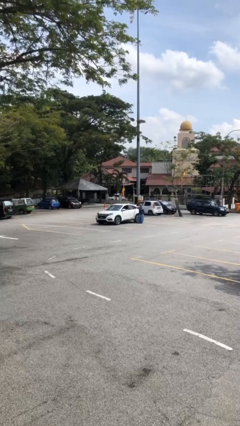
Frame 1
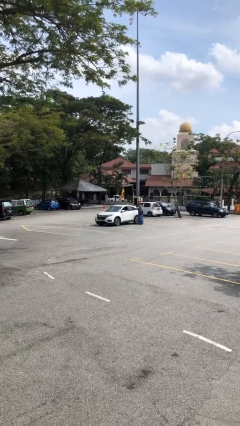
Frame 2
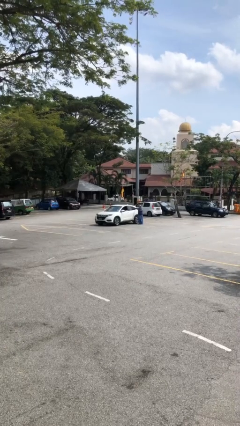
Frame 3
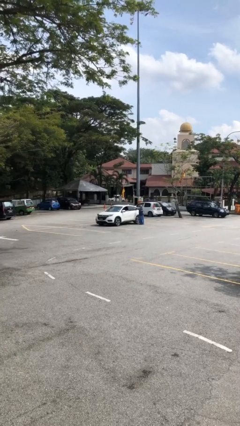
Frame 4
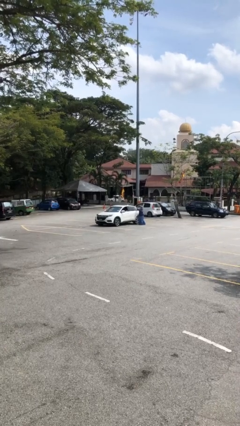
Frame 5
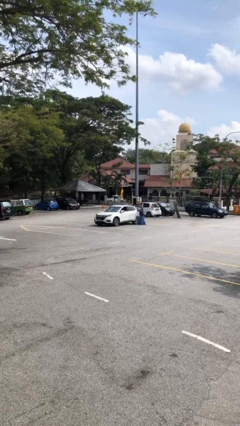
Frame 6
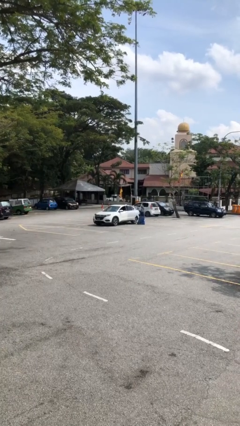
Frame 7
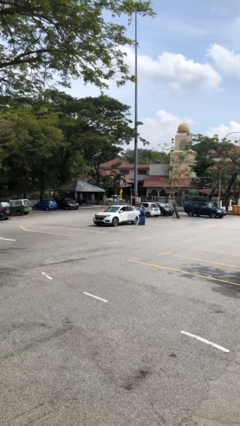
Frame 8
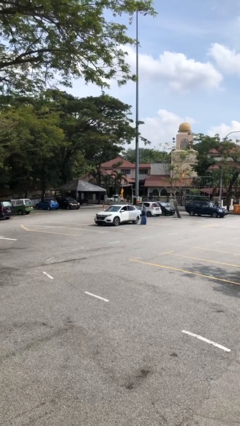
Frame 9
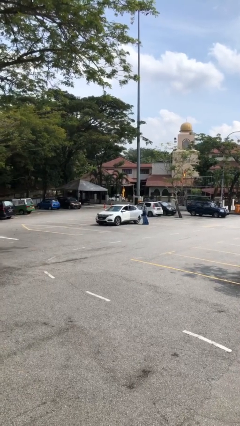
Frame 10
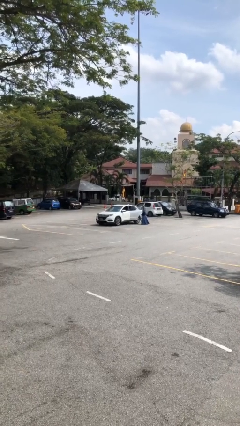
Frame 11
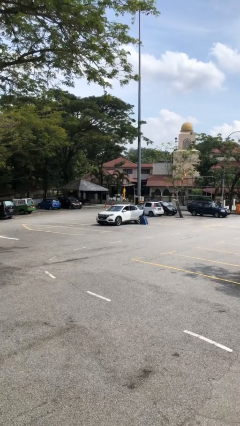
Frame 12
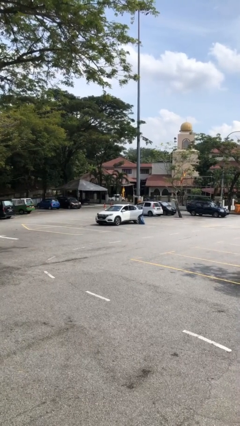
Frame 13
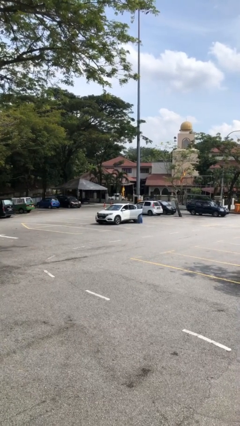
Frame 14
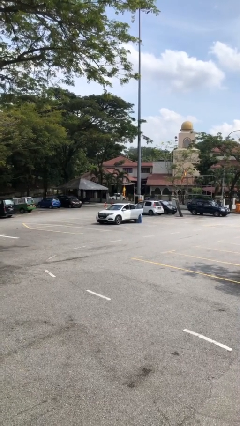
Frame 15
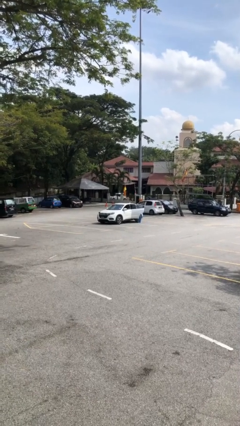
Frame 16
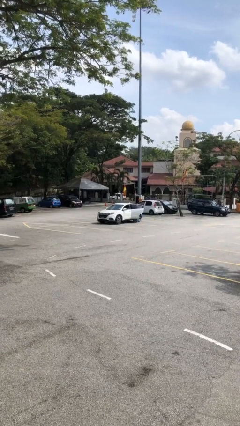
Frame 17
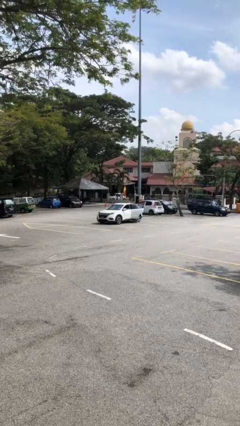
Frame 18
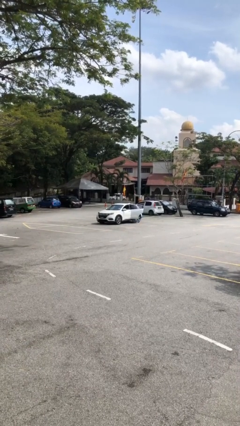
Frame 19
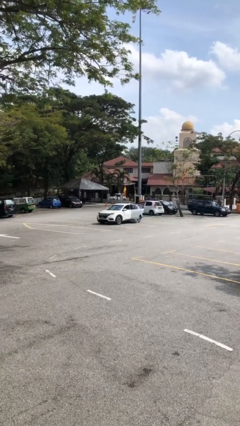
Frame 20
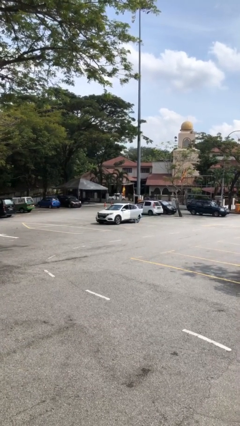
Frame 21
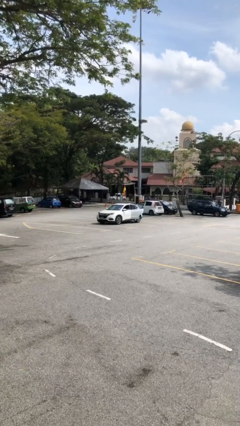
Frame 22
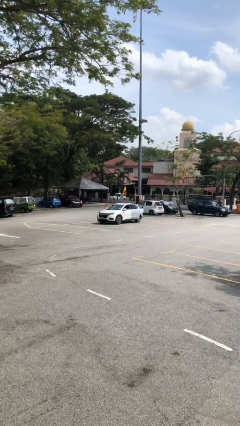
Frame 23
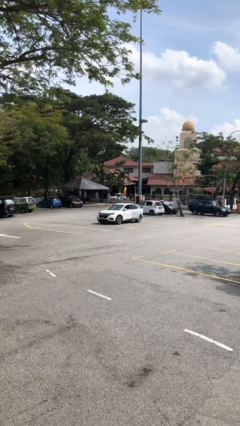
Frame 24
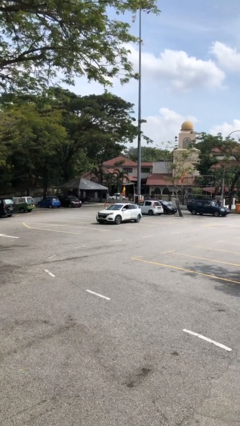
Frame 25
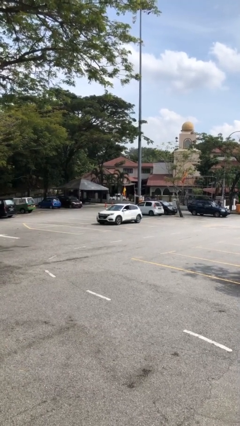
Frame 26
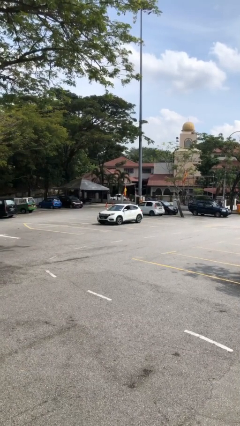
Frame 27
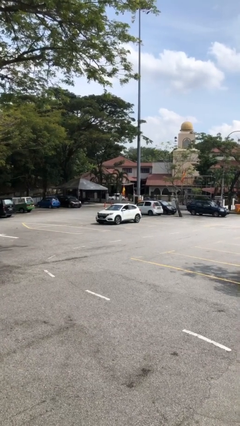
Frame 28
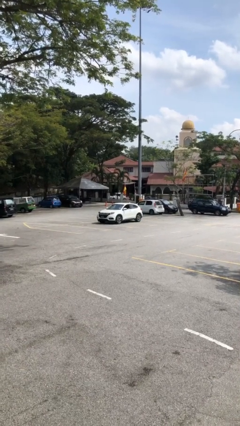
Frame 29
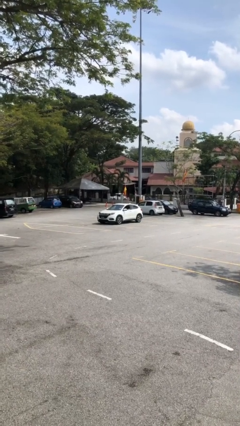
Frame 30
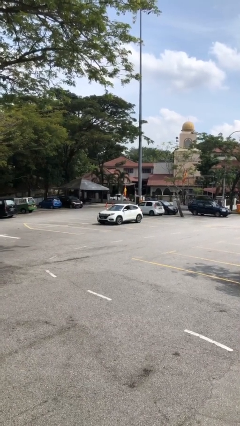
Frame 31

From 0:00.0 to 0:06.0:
car picks up person

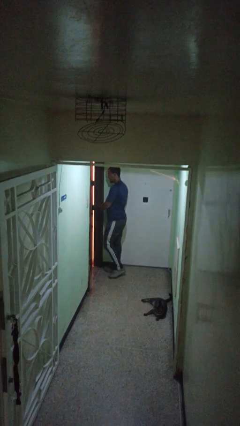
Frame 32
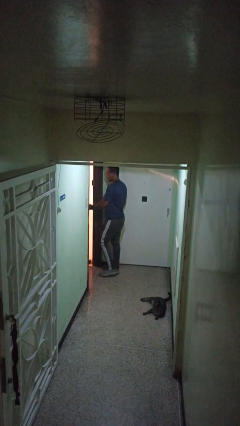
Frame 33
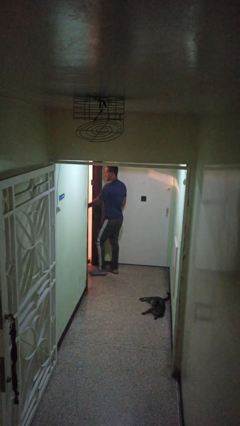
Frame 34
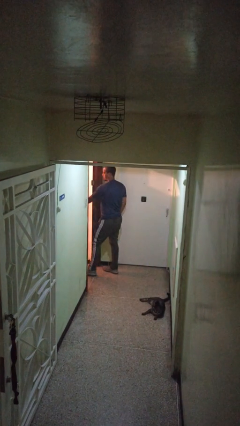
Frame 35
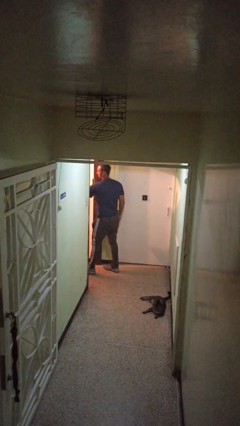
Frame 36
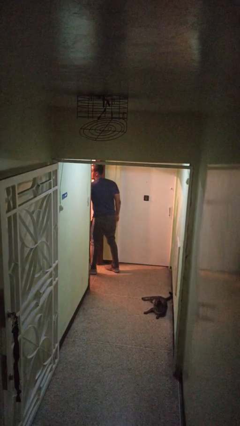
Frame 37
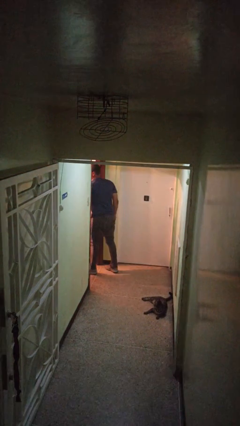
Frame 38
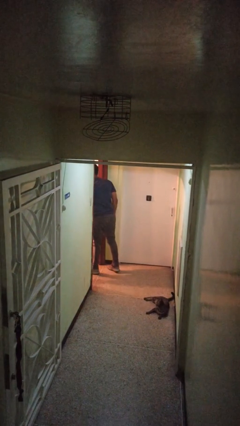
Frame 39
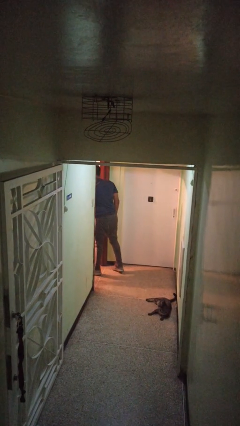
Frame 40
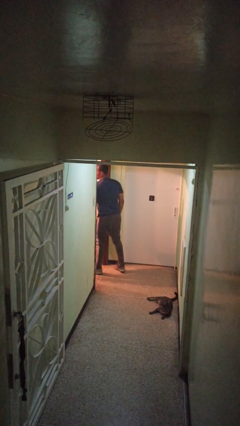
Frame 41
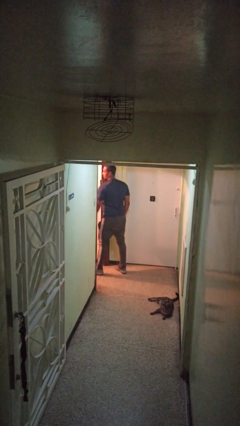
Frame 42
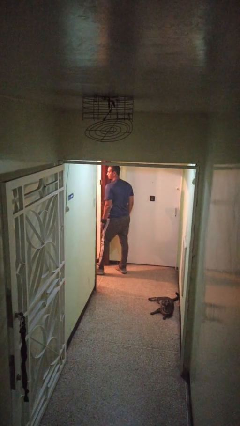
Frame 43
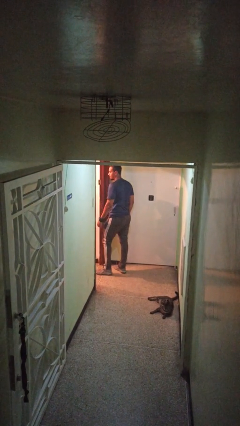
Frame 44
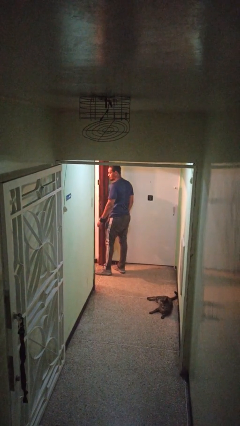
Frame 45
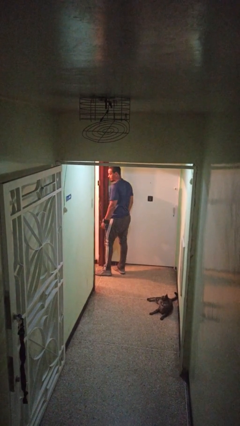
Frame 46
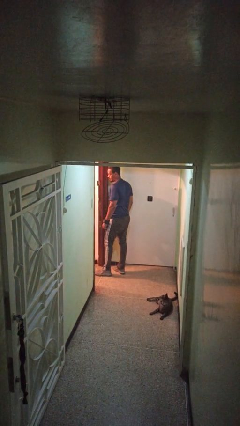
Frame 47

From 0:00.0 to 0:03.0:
person opens facility door

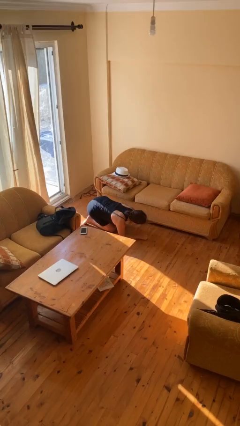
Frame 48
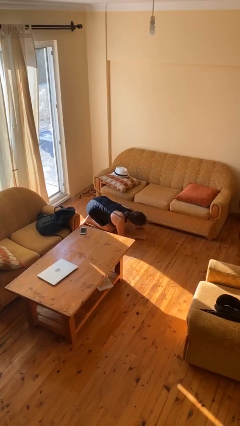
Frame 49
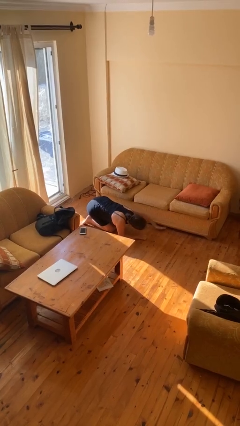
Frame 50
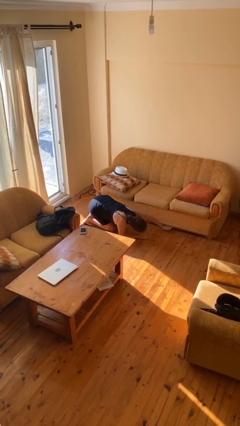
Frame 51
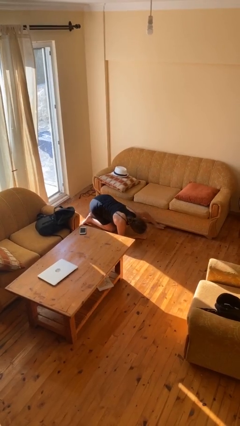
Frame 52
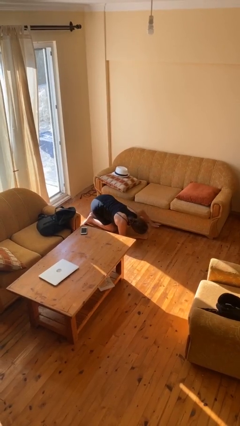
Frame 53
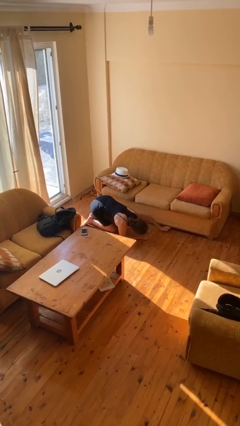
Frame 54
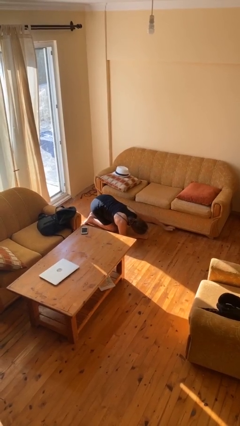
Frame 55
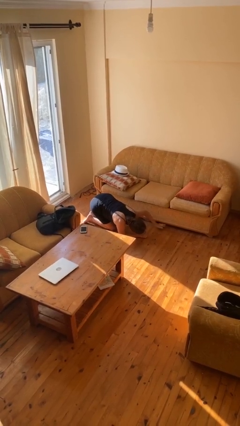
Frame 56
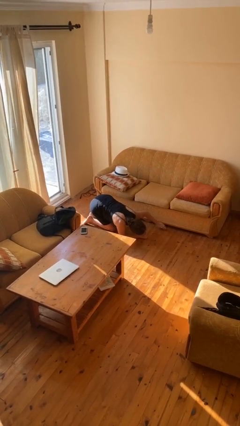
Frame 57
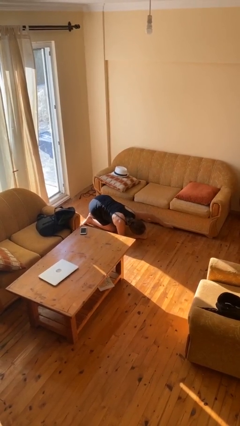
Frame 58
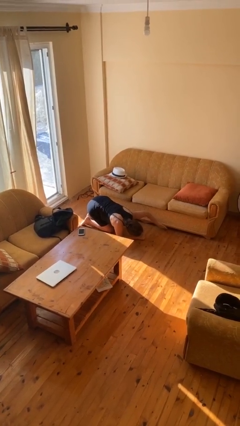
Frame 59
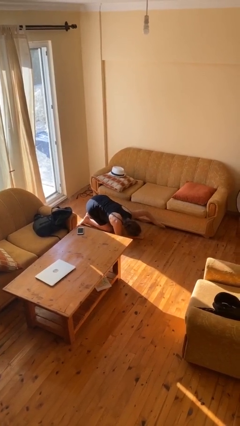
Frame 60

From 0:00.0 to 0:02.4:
person searches under couch

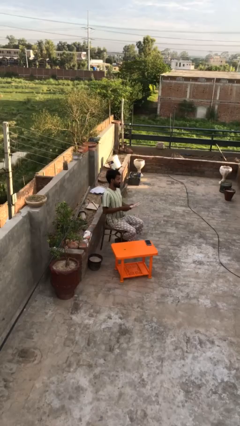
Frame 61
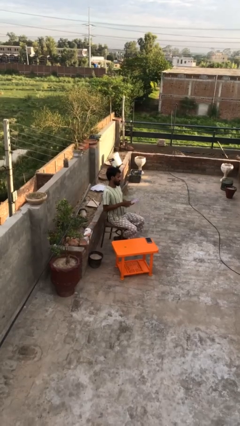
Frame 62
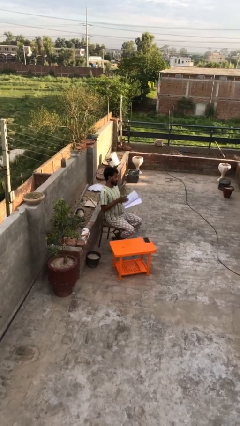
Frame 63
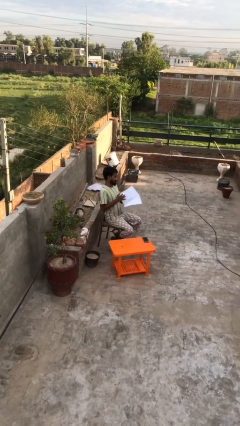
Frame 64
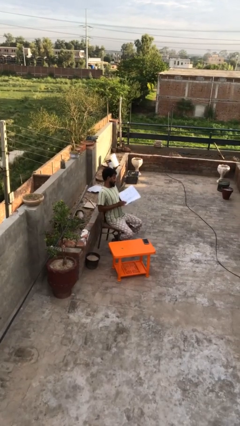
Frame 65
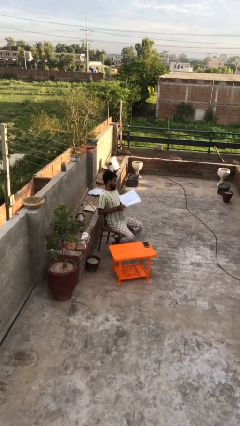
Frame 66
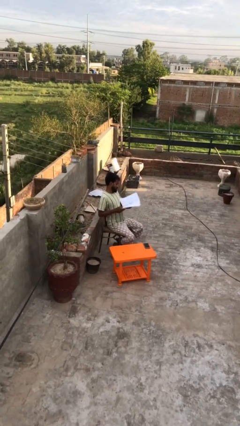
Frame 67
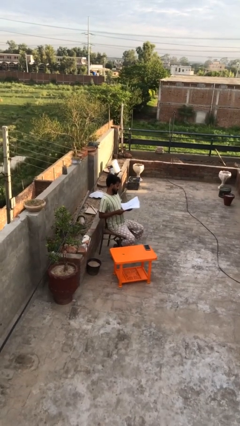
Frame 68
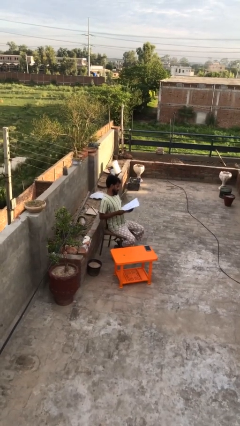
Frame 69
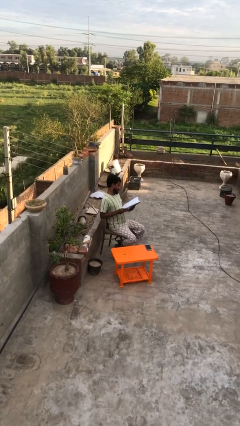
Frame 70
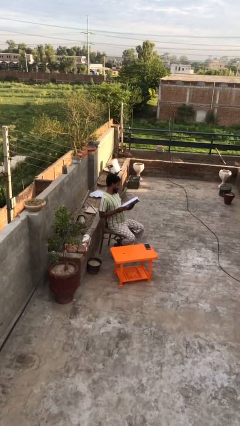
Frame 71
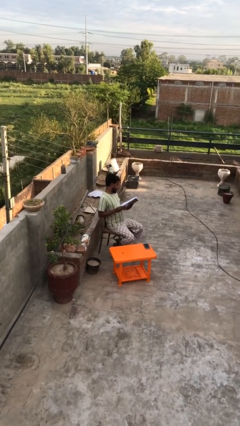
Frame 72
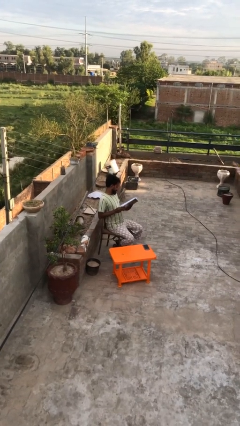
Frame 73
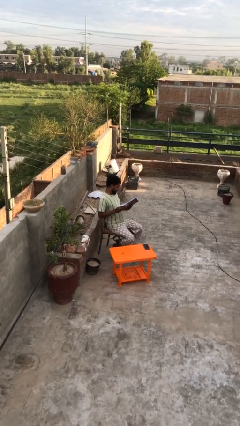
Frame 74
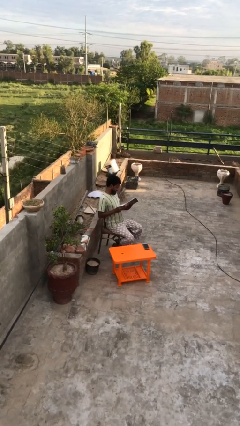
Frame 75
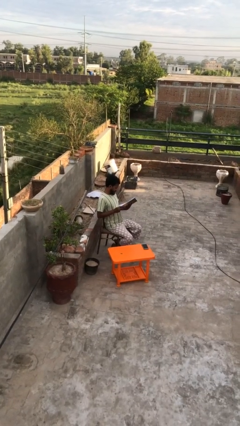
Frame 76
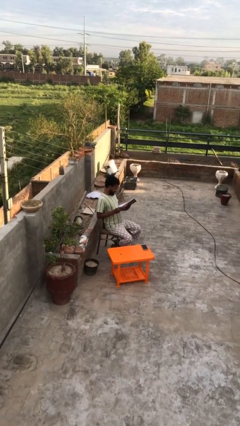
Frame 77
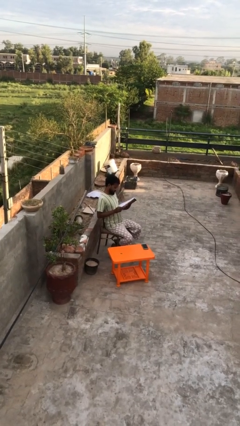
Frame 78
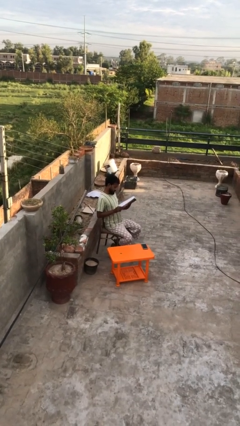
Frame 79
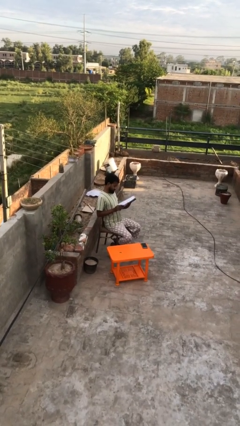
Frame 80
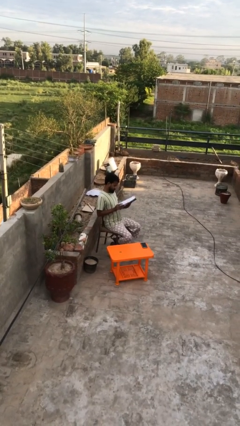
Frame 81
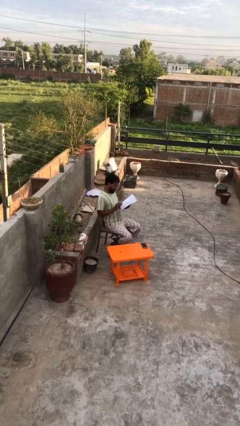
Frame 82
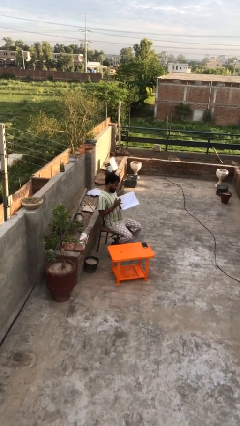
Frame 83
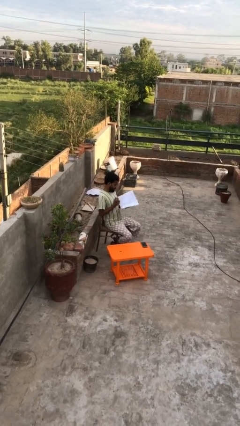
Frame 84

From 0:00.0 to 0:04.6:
person reads document

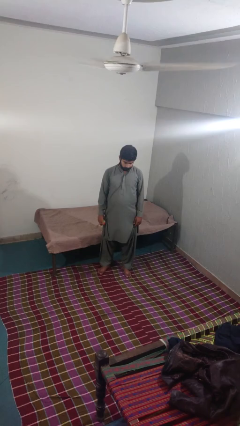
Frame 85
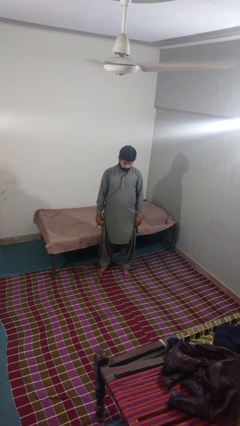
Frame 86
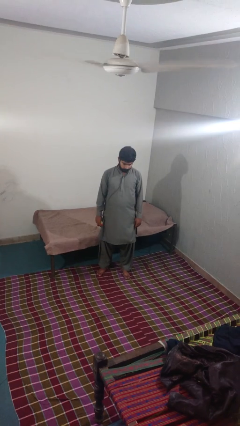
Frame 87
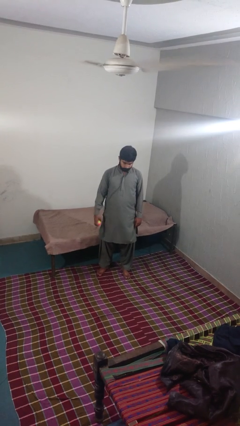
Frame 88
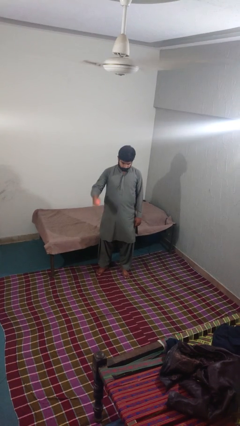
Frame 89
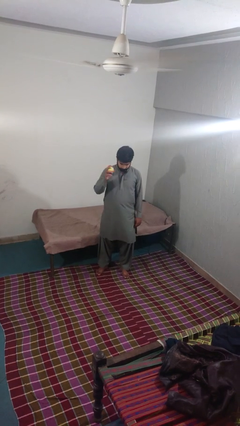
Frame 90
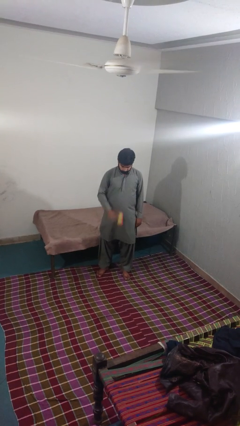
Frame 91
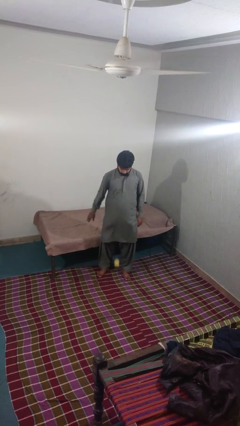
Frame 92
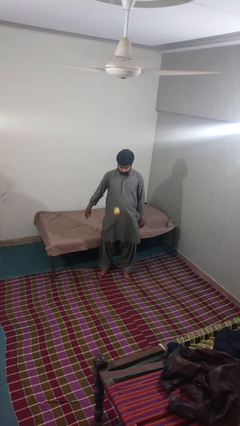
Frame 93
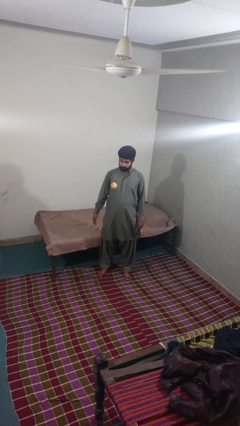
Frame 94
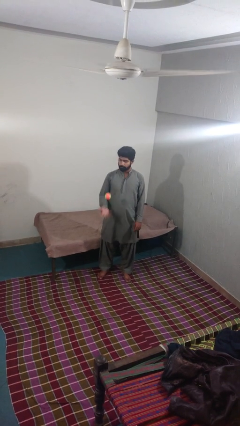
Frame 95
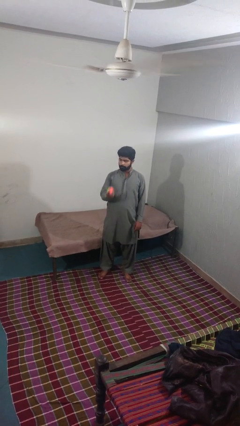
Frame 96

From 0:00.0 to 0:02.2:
person bounces ball on floor
